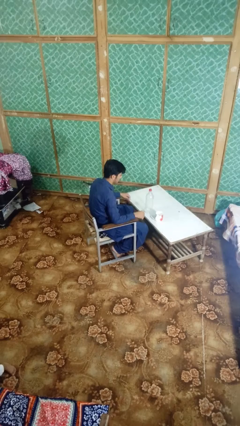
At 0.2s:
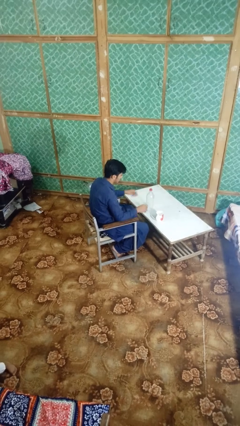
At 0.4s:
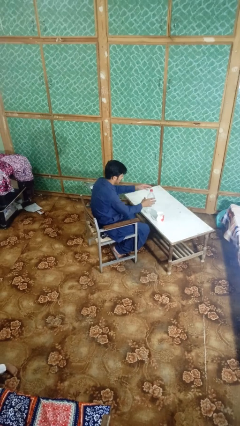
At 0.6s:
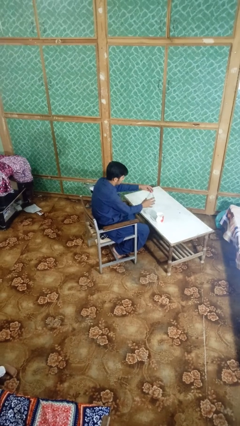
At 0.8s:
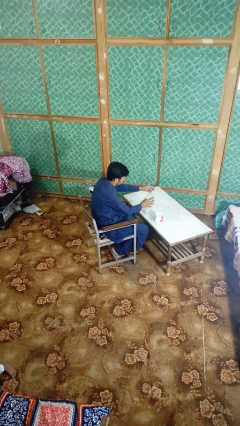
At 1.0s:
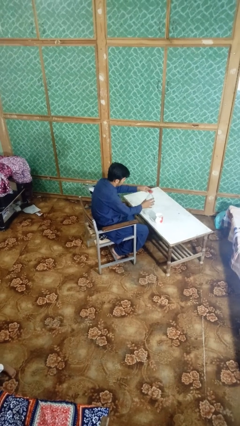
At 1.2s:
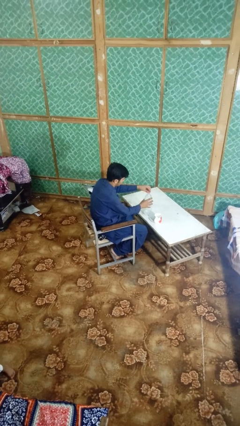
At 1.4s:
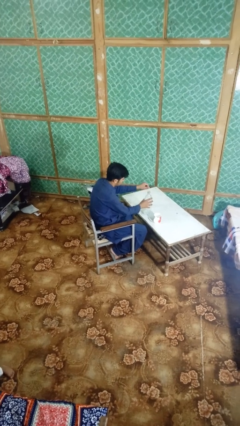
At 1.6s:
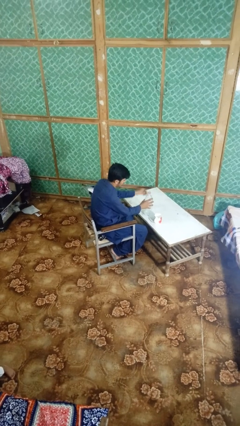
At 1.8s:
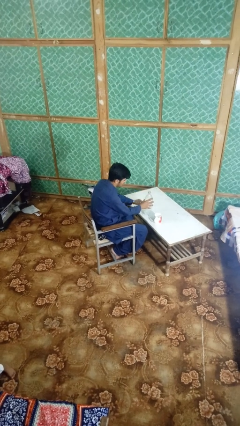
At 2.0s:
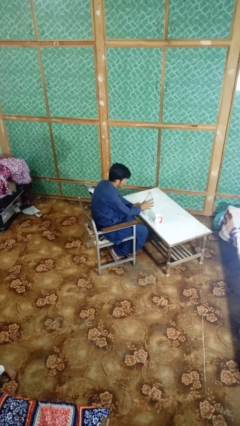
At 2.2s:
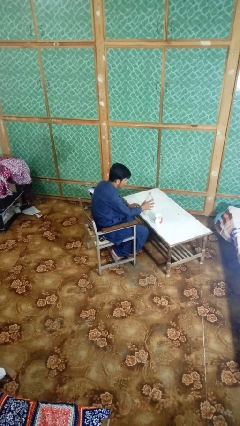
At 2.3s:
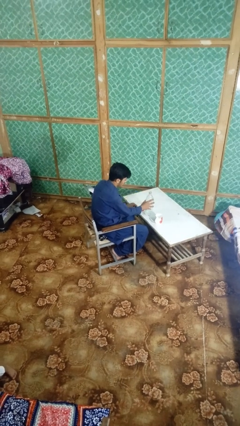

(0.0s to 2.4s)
person unscrews lid from bottle

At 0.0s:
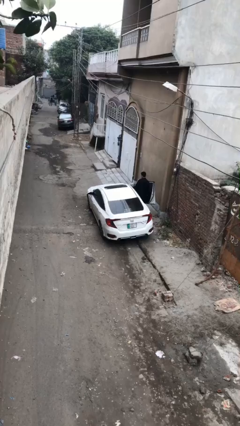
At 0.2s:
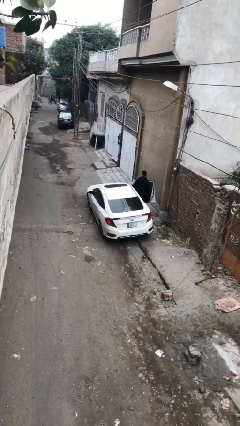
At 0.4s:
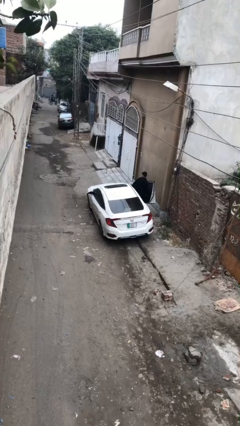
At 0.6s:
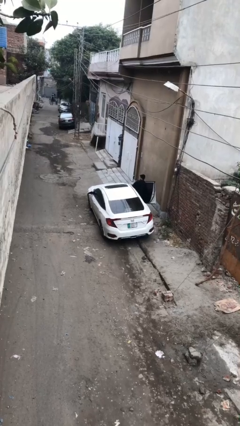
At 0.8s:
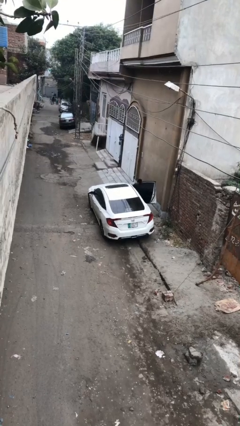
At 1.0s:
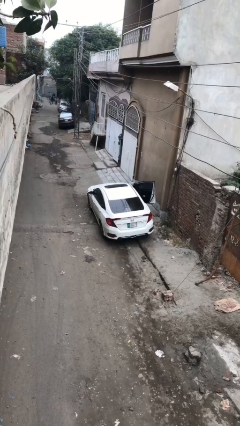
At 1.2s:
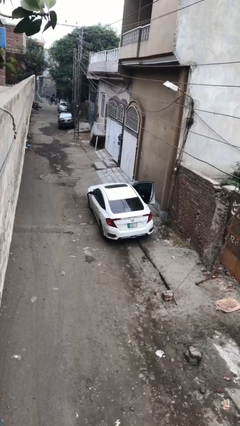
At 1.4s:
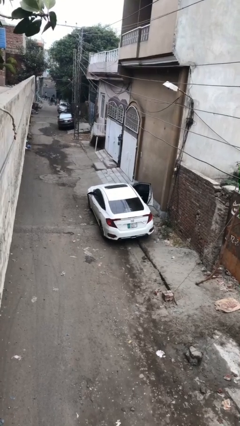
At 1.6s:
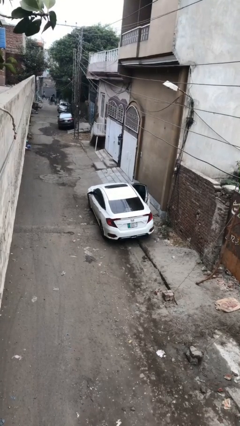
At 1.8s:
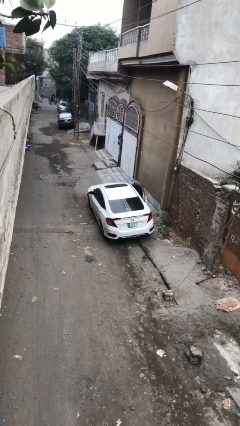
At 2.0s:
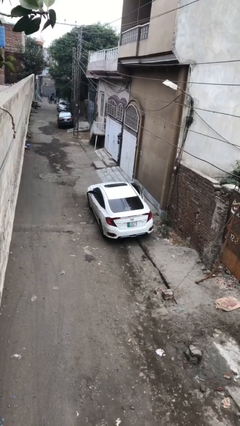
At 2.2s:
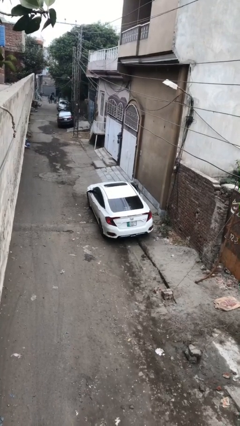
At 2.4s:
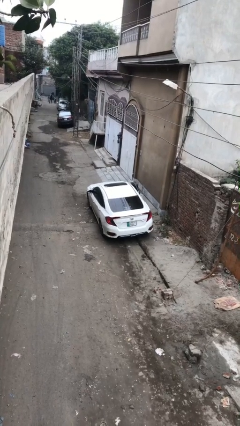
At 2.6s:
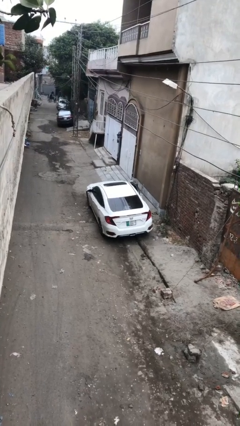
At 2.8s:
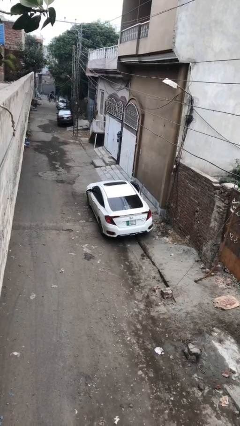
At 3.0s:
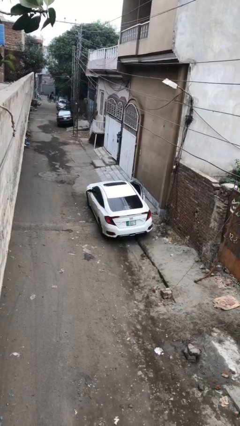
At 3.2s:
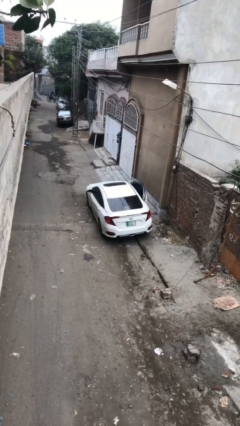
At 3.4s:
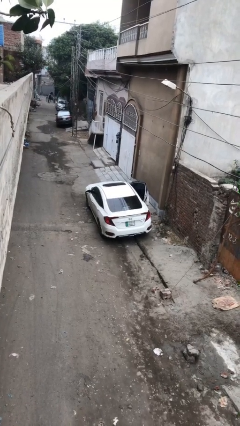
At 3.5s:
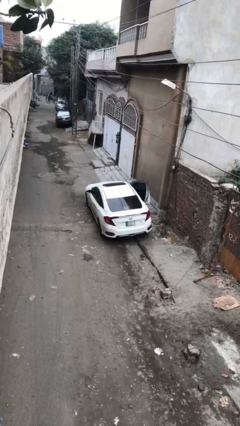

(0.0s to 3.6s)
car picks up person

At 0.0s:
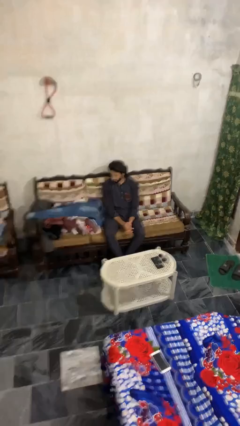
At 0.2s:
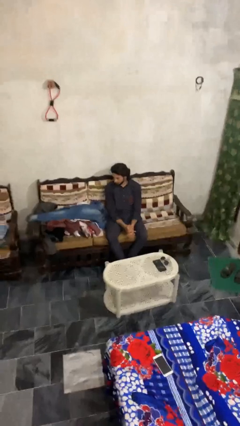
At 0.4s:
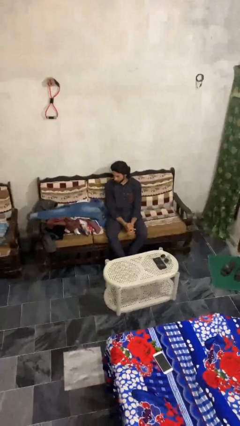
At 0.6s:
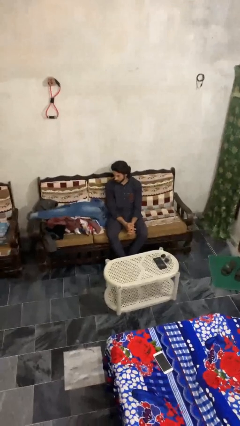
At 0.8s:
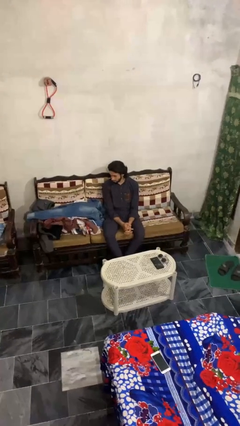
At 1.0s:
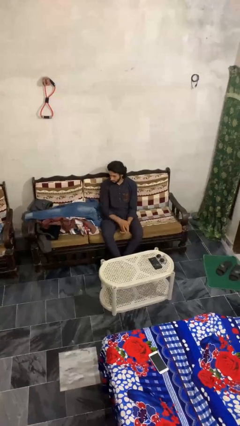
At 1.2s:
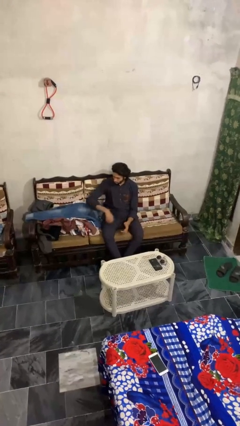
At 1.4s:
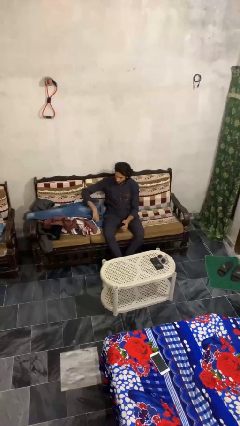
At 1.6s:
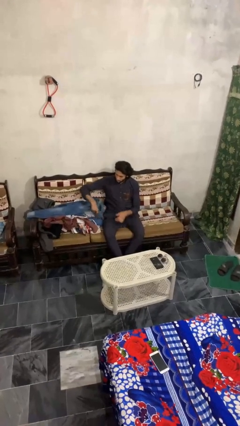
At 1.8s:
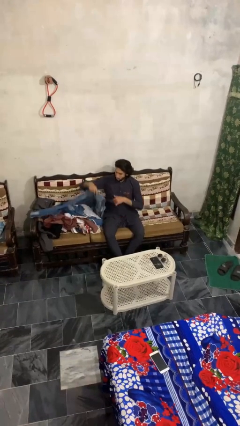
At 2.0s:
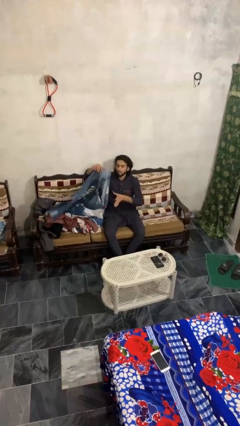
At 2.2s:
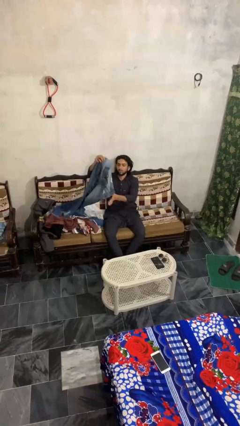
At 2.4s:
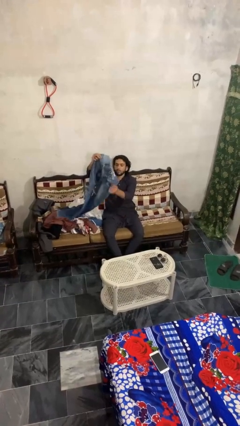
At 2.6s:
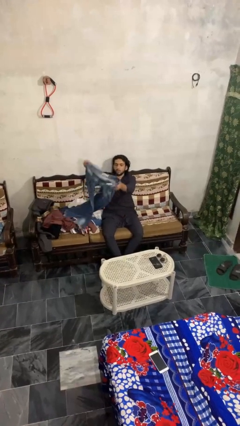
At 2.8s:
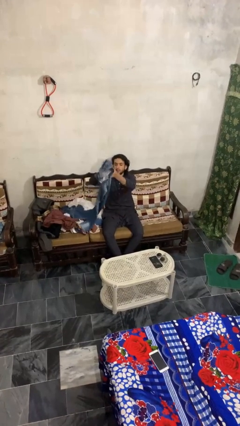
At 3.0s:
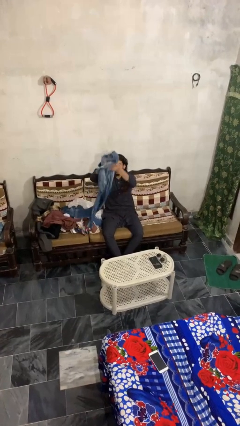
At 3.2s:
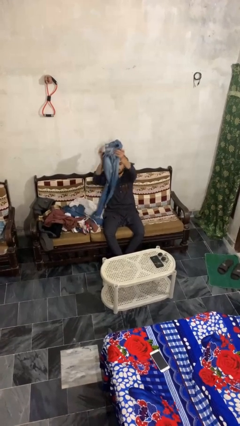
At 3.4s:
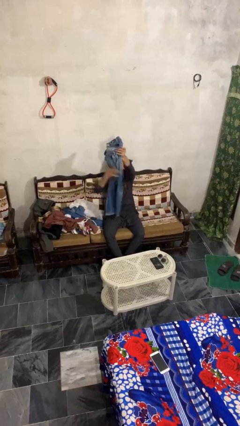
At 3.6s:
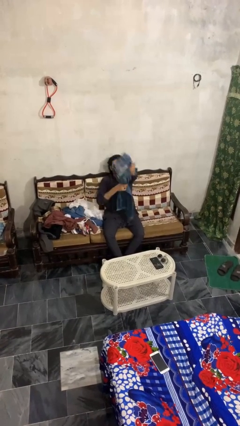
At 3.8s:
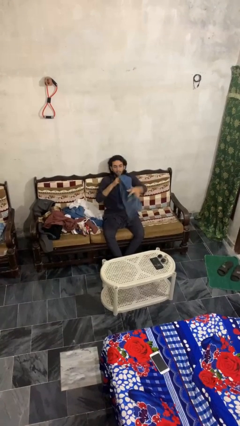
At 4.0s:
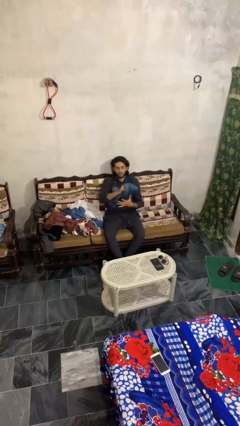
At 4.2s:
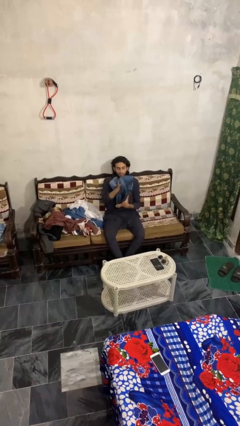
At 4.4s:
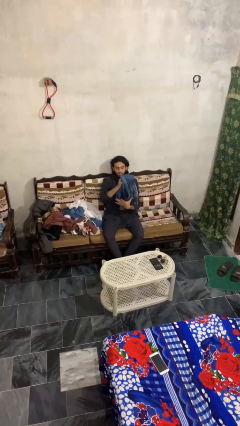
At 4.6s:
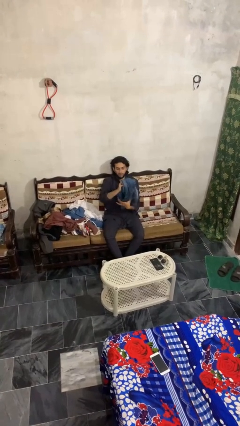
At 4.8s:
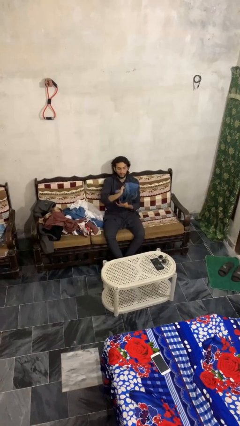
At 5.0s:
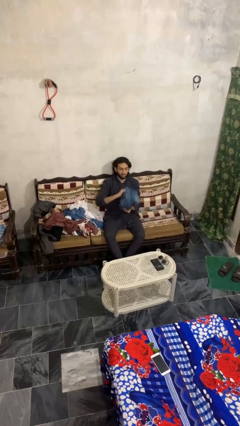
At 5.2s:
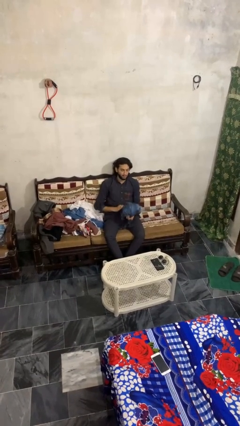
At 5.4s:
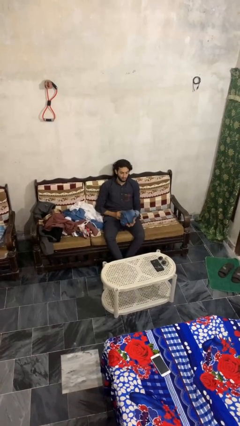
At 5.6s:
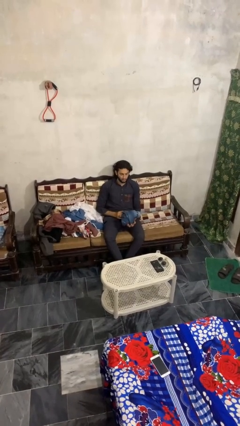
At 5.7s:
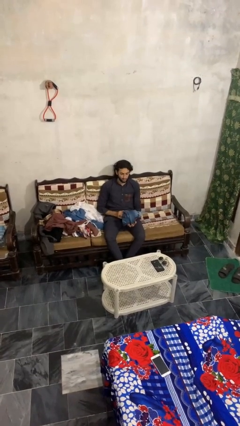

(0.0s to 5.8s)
person folds pants

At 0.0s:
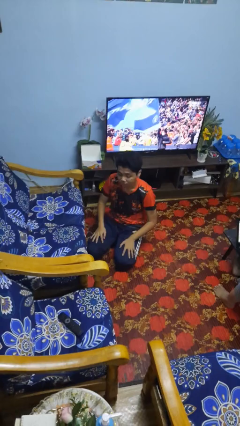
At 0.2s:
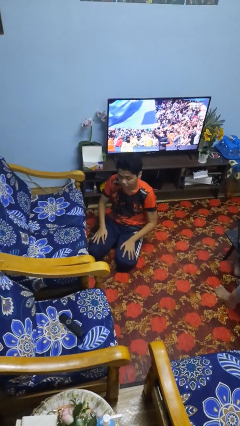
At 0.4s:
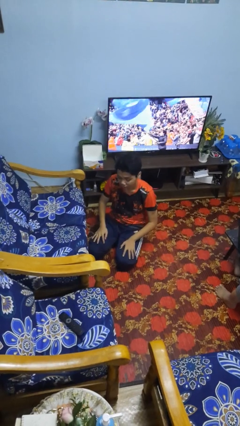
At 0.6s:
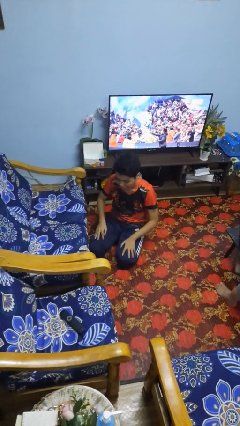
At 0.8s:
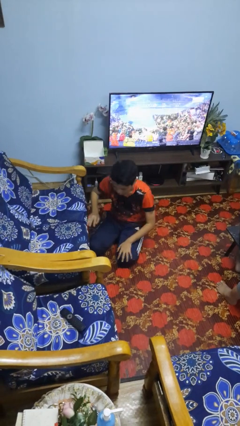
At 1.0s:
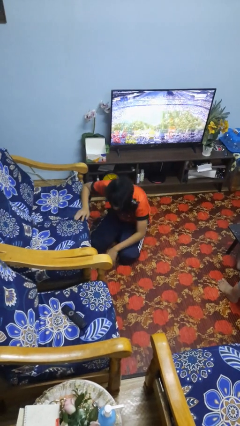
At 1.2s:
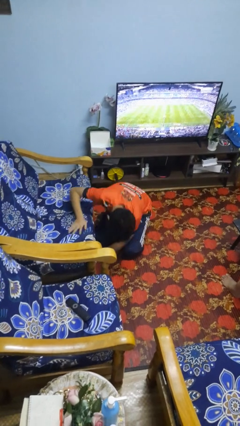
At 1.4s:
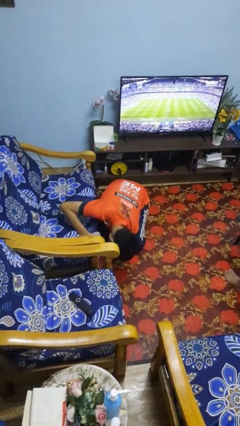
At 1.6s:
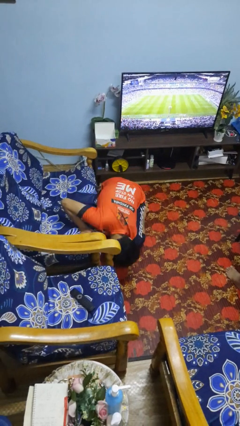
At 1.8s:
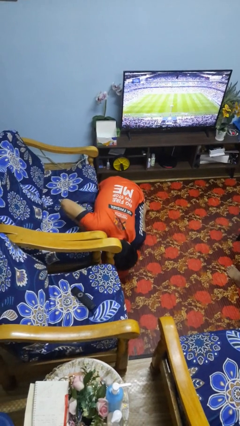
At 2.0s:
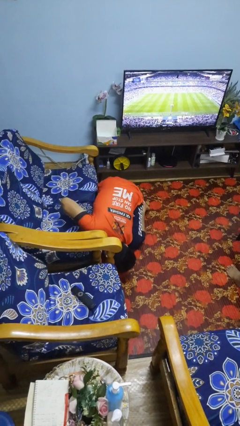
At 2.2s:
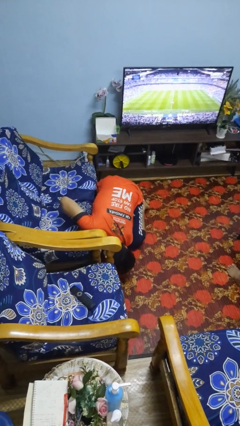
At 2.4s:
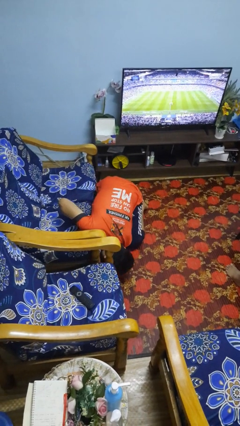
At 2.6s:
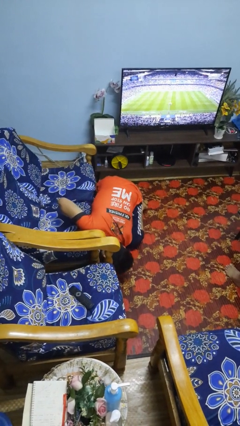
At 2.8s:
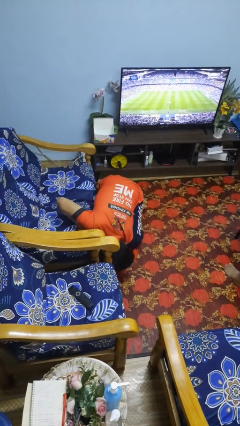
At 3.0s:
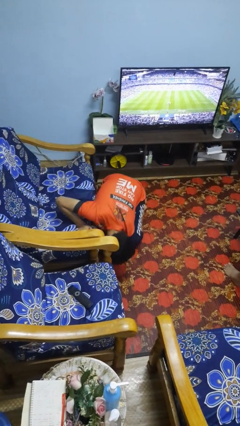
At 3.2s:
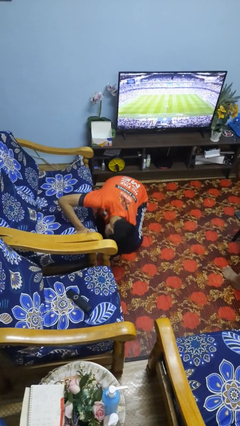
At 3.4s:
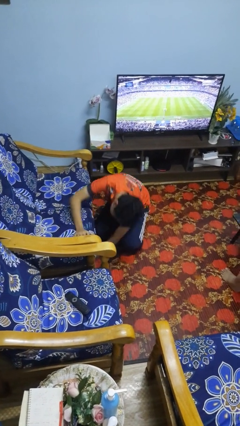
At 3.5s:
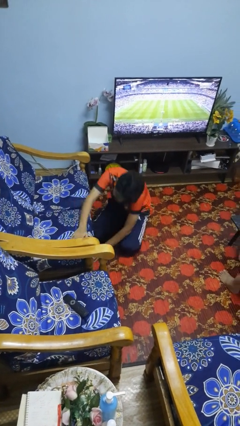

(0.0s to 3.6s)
person searches under couch

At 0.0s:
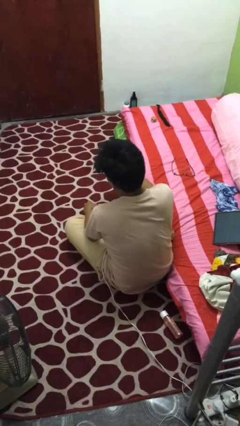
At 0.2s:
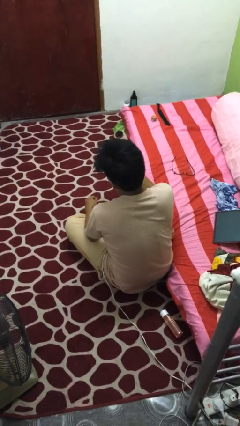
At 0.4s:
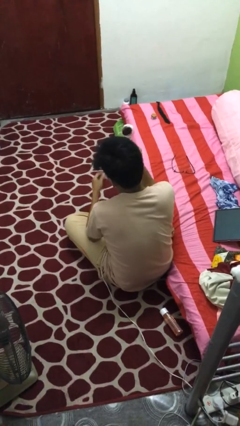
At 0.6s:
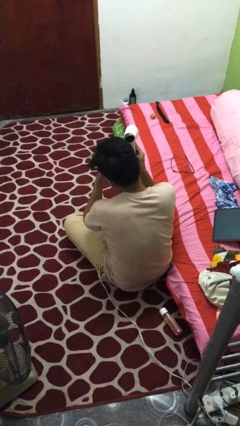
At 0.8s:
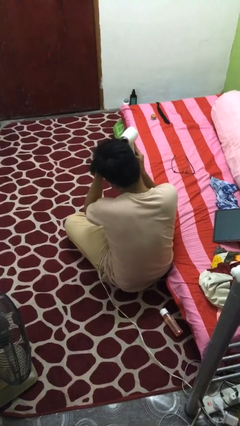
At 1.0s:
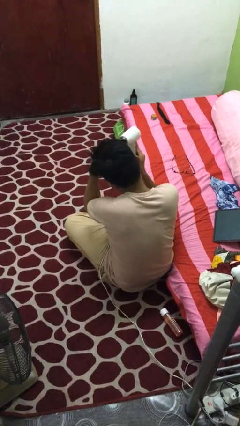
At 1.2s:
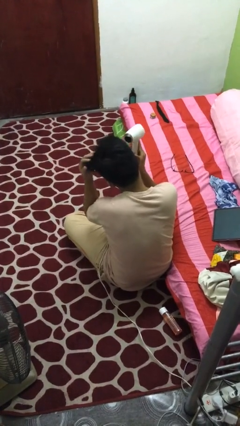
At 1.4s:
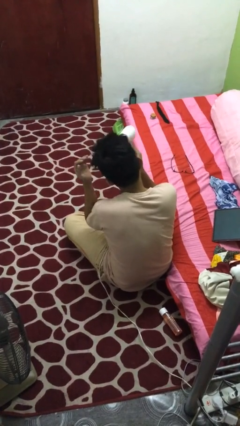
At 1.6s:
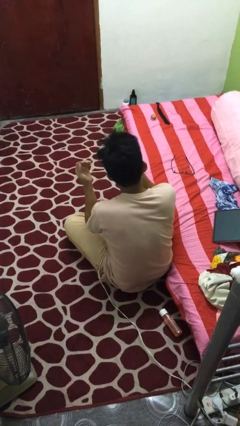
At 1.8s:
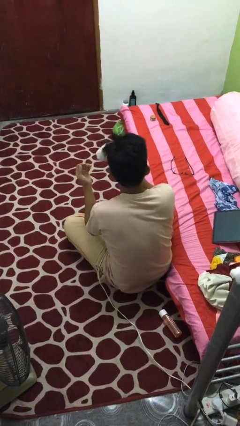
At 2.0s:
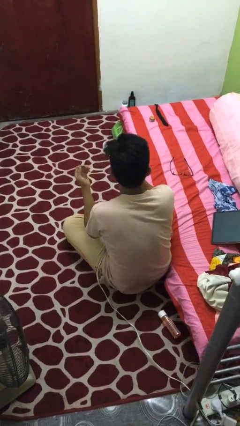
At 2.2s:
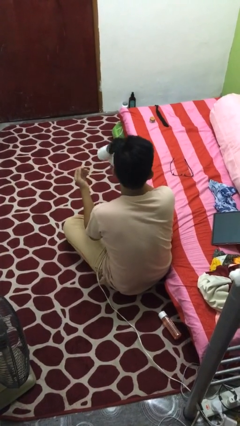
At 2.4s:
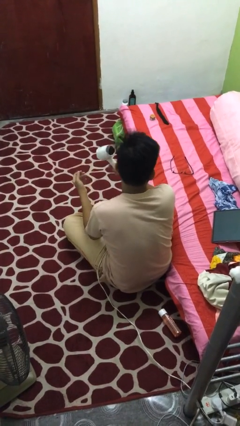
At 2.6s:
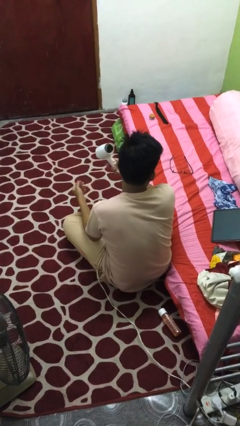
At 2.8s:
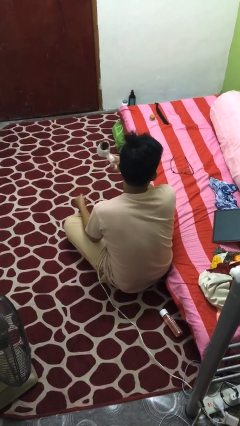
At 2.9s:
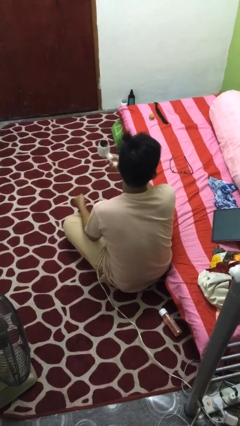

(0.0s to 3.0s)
person dries hair with hairdryer
